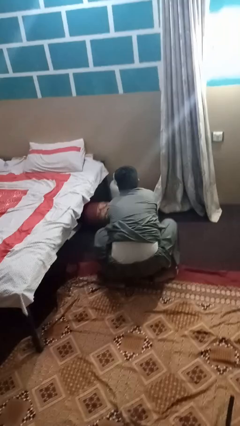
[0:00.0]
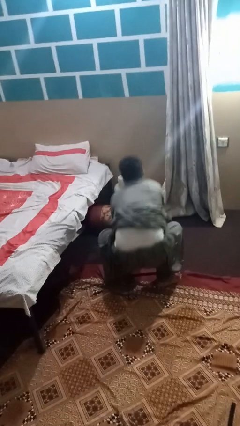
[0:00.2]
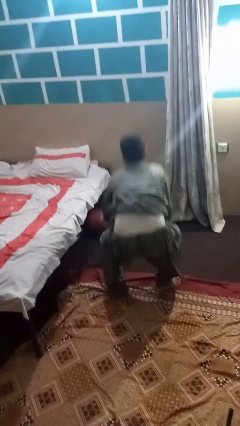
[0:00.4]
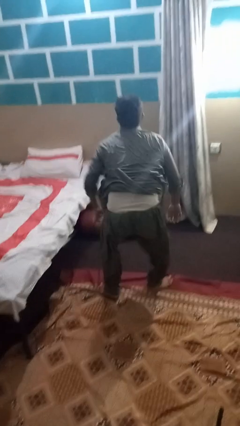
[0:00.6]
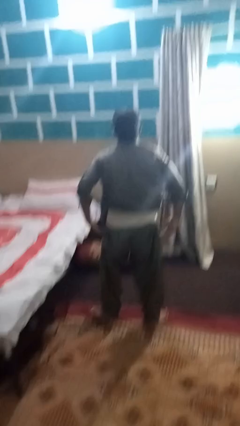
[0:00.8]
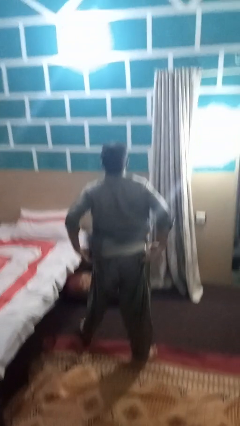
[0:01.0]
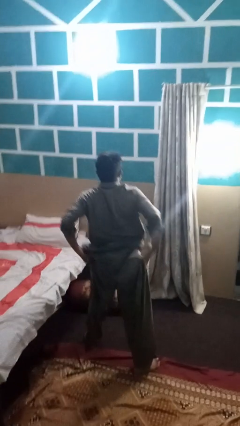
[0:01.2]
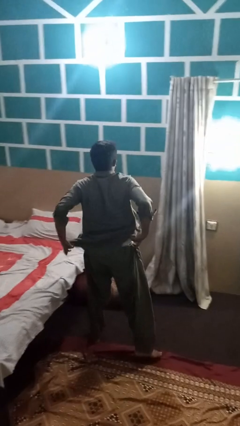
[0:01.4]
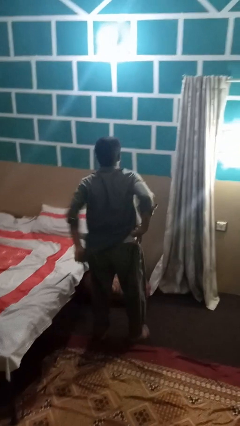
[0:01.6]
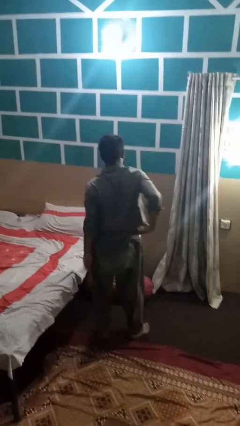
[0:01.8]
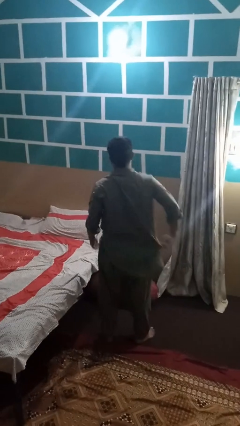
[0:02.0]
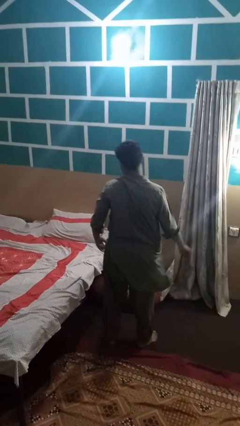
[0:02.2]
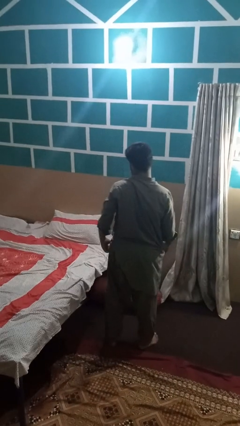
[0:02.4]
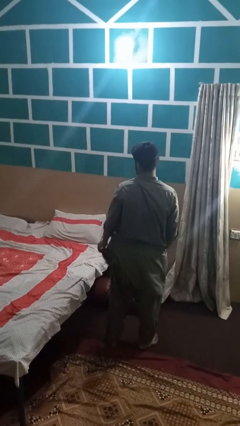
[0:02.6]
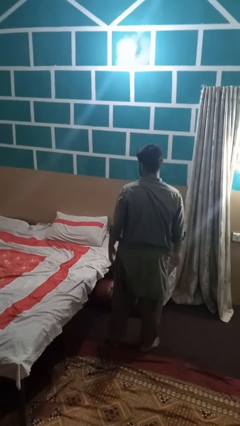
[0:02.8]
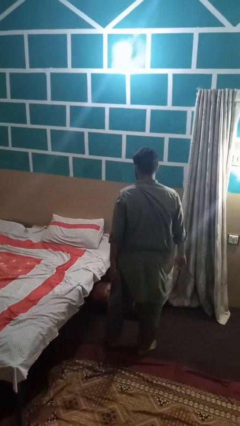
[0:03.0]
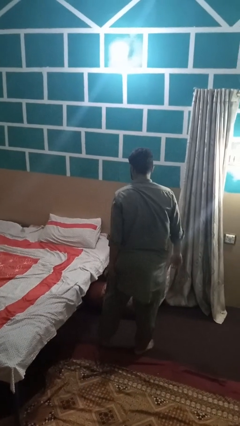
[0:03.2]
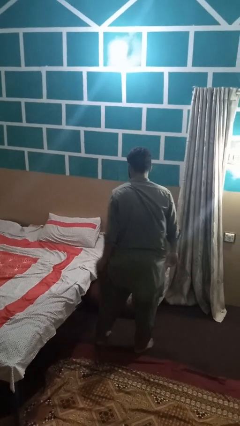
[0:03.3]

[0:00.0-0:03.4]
person stands up from floor

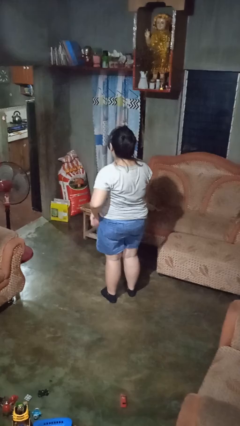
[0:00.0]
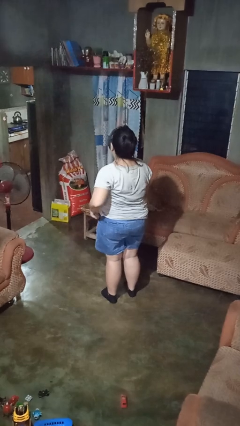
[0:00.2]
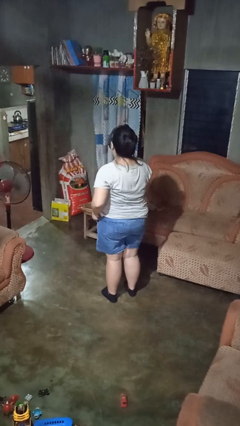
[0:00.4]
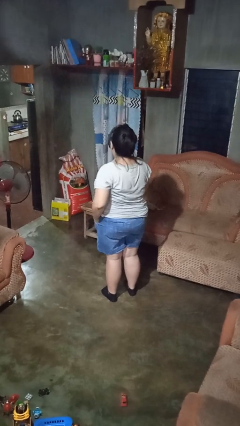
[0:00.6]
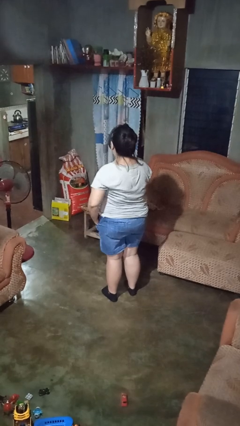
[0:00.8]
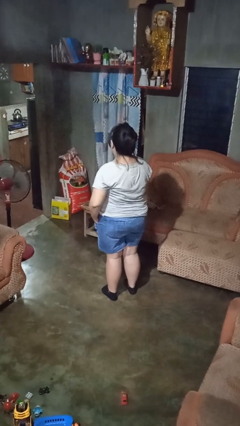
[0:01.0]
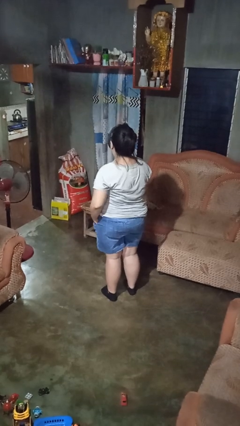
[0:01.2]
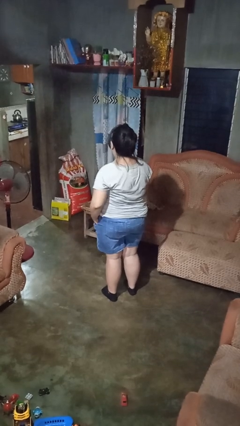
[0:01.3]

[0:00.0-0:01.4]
person puts hands in back pockets

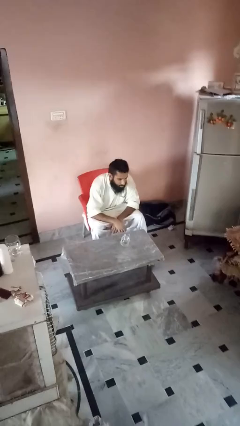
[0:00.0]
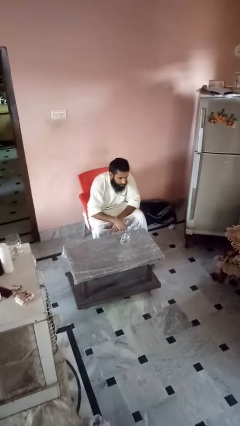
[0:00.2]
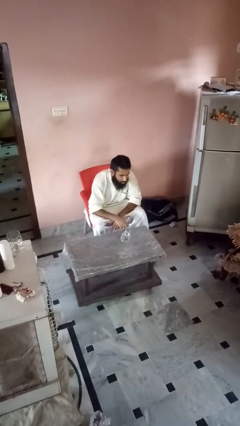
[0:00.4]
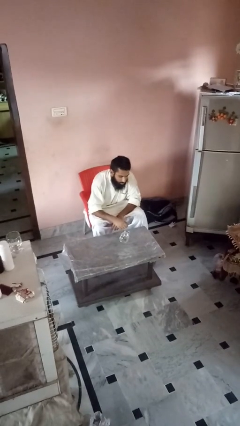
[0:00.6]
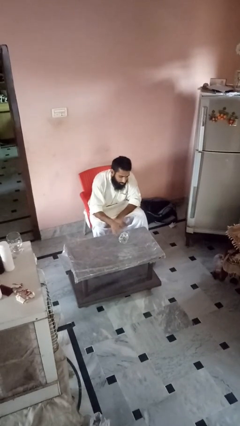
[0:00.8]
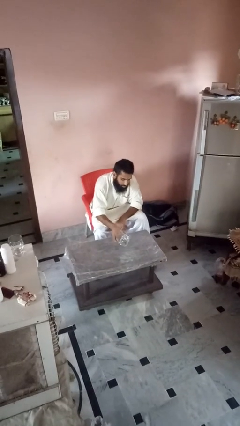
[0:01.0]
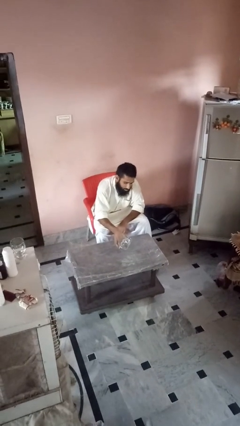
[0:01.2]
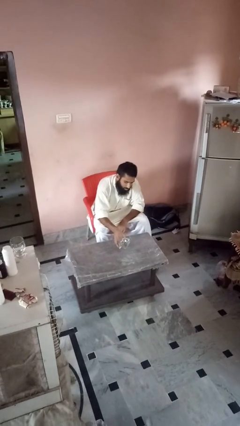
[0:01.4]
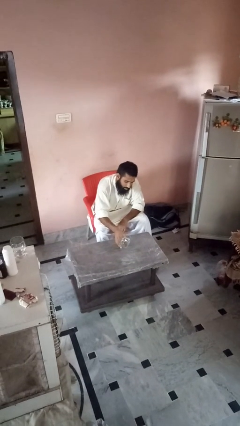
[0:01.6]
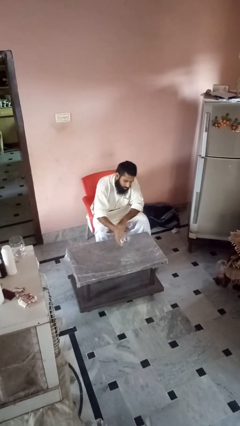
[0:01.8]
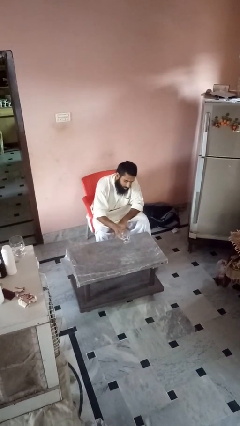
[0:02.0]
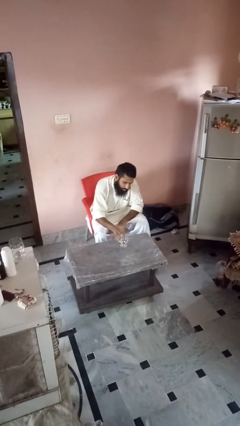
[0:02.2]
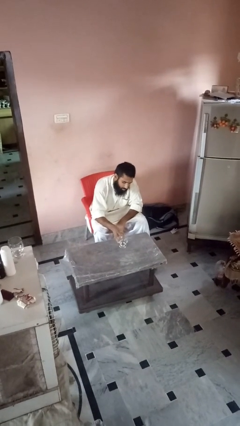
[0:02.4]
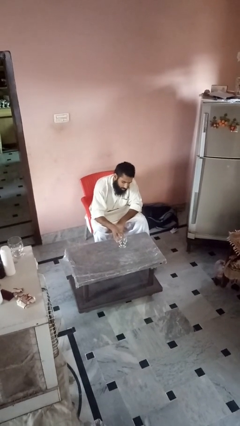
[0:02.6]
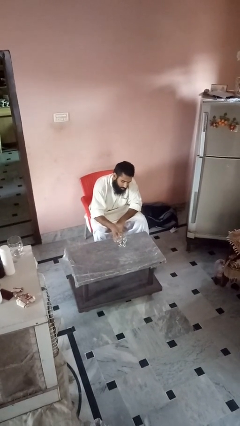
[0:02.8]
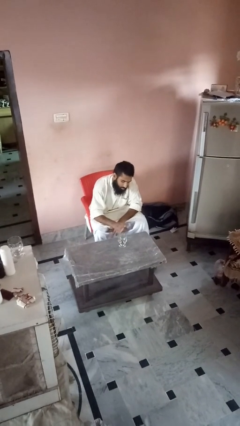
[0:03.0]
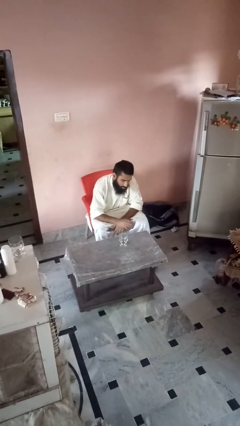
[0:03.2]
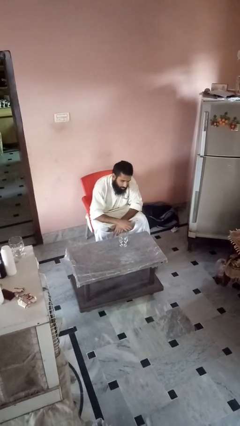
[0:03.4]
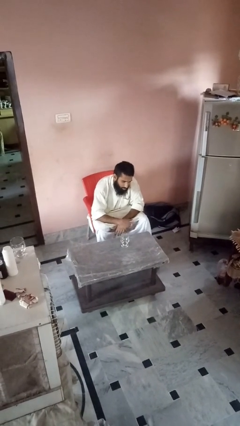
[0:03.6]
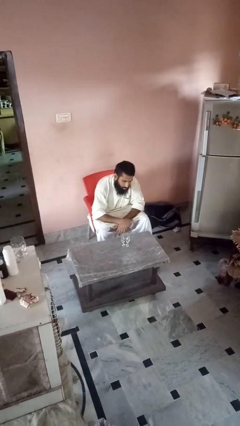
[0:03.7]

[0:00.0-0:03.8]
person sets upright glass

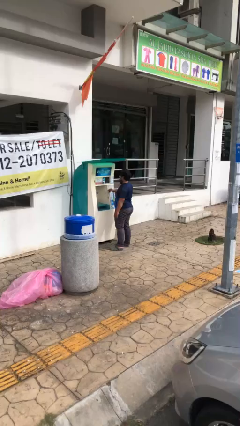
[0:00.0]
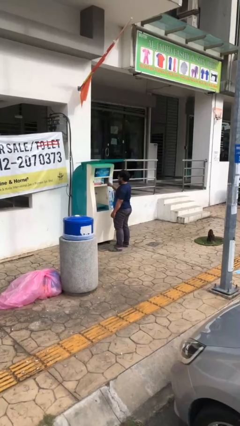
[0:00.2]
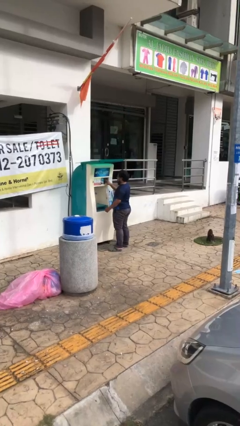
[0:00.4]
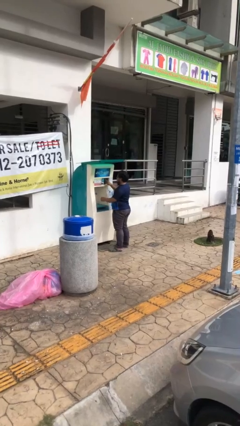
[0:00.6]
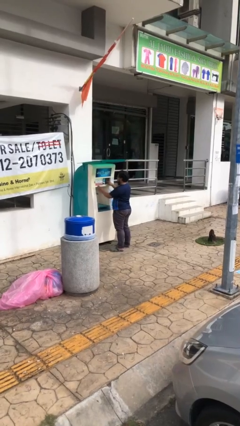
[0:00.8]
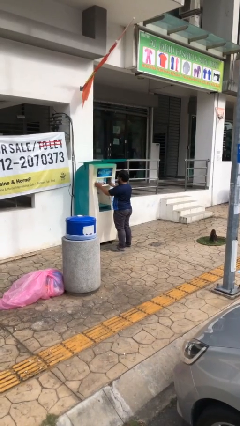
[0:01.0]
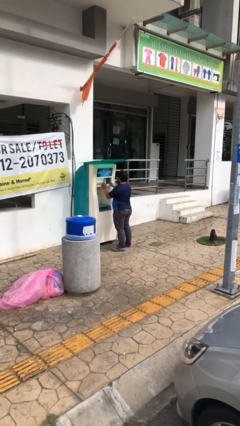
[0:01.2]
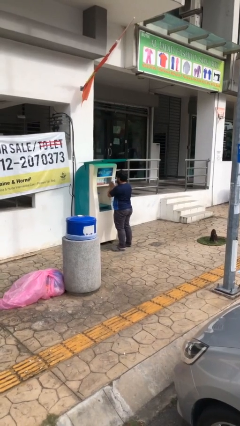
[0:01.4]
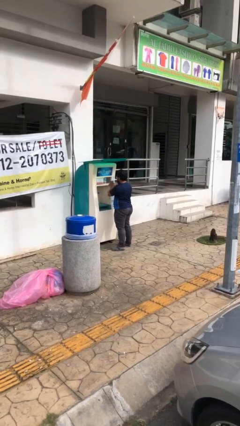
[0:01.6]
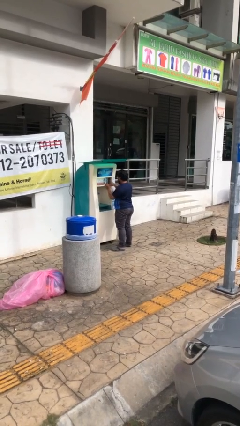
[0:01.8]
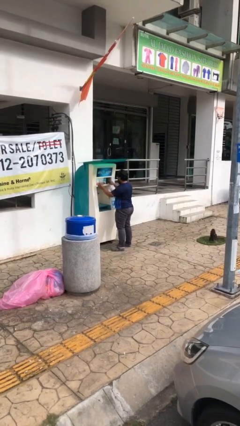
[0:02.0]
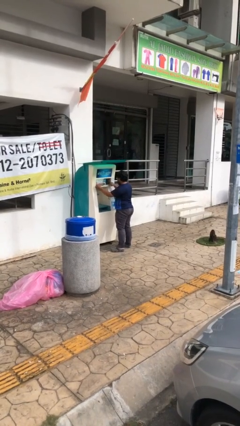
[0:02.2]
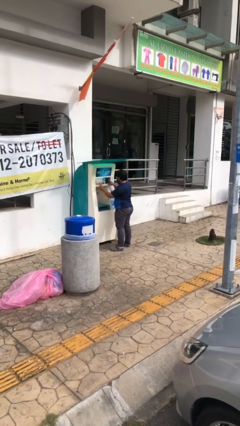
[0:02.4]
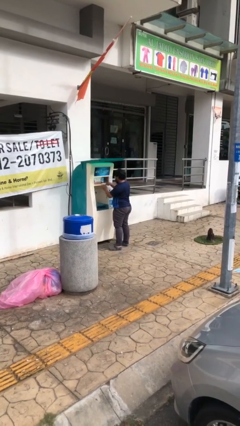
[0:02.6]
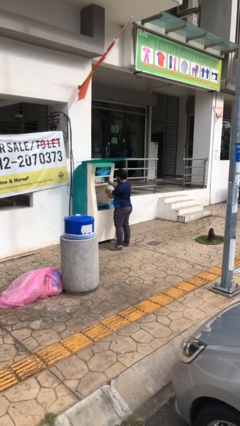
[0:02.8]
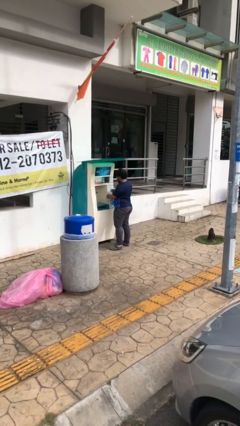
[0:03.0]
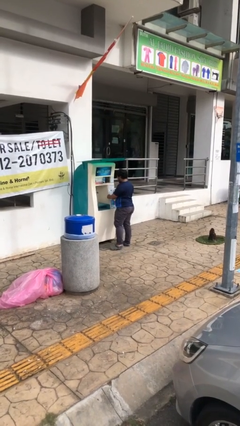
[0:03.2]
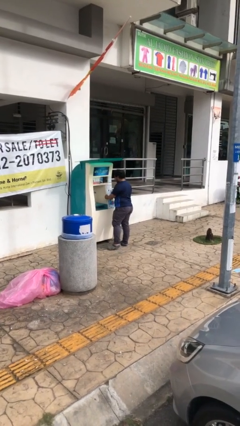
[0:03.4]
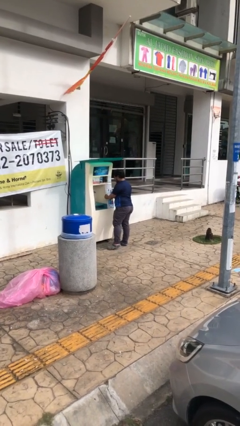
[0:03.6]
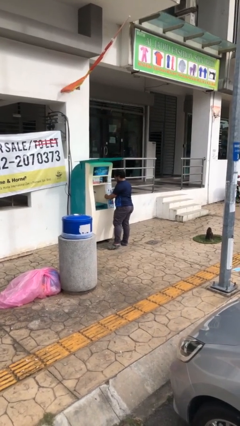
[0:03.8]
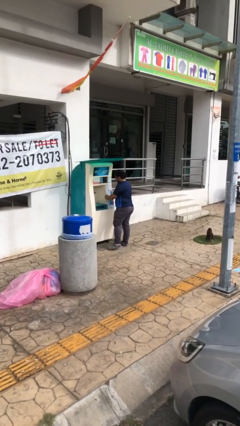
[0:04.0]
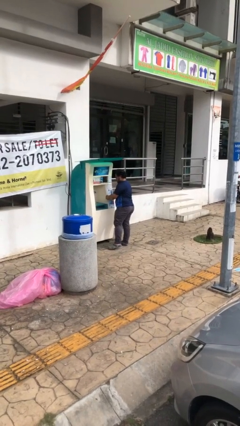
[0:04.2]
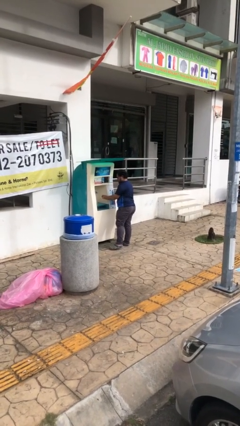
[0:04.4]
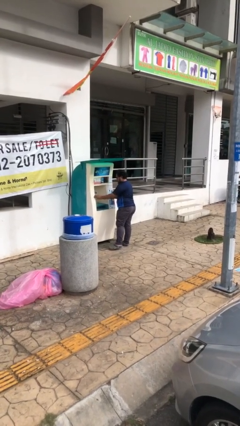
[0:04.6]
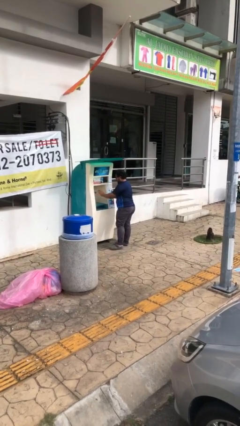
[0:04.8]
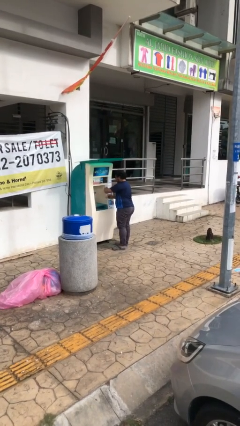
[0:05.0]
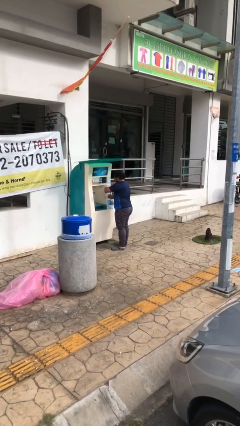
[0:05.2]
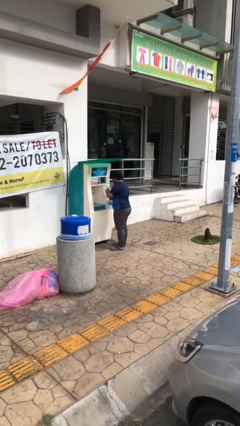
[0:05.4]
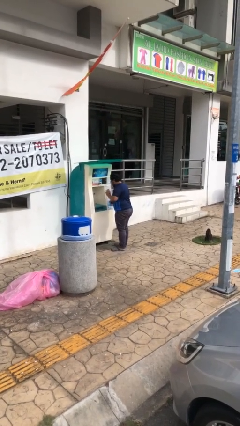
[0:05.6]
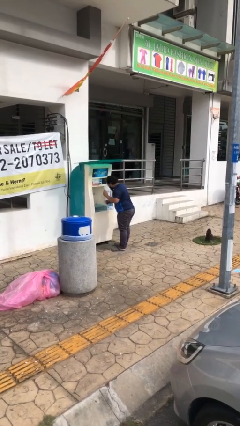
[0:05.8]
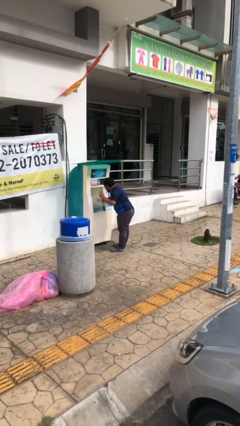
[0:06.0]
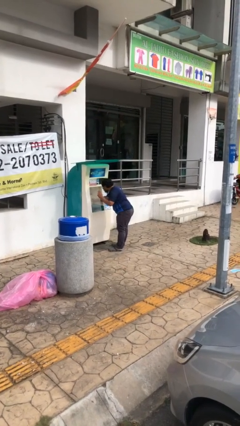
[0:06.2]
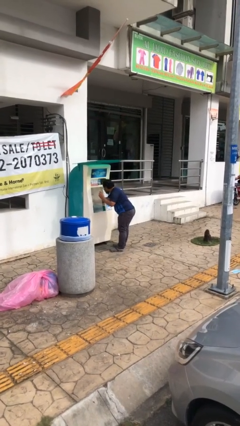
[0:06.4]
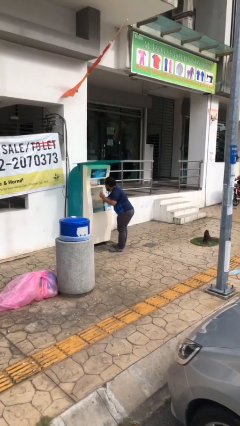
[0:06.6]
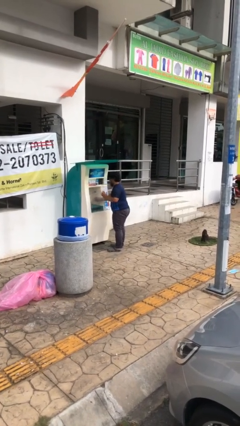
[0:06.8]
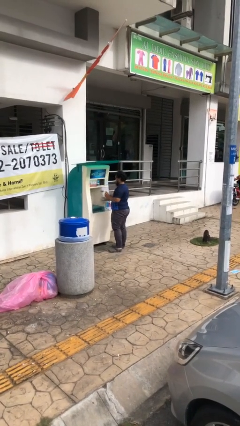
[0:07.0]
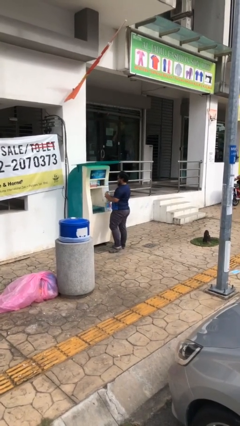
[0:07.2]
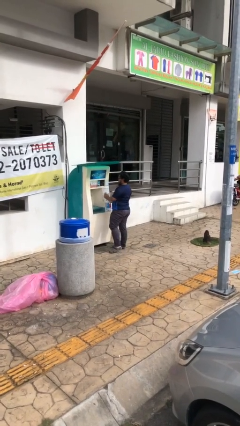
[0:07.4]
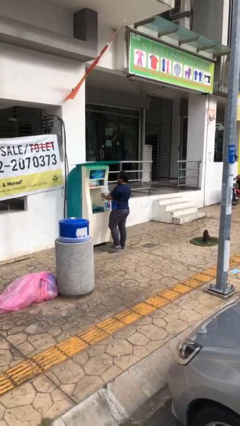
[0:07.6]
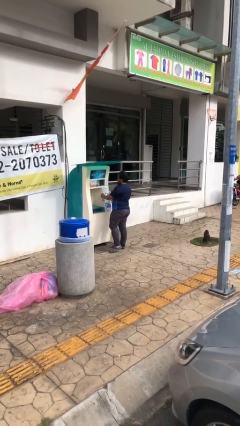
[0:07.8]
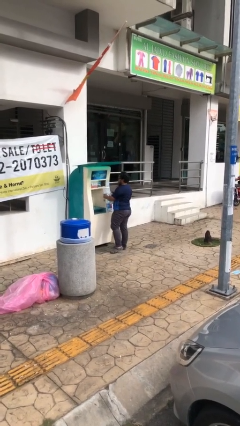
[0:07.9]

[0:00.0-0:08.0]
person purchases from machine

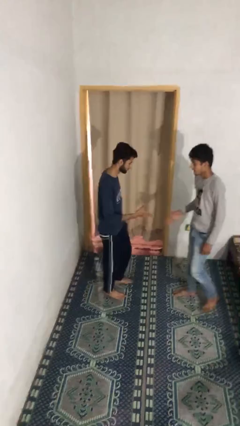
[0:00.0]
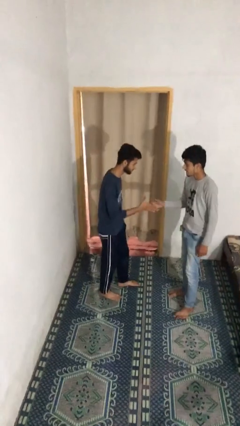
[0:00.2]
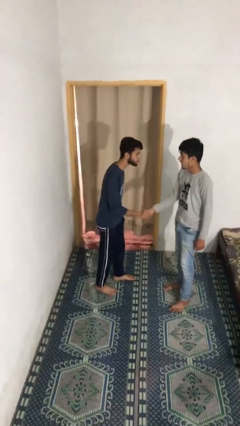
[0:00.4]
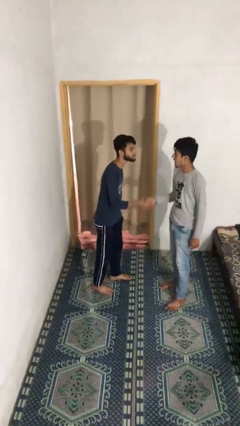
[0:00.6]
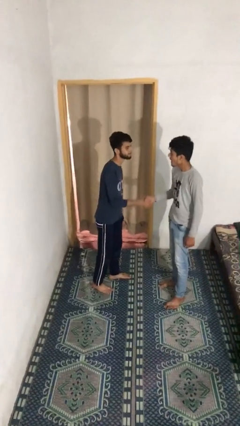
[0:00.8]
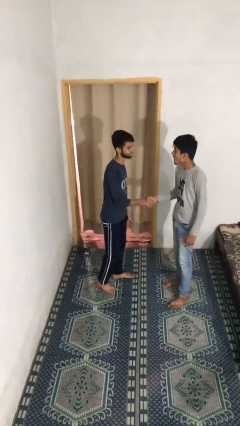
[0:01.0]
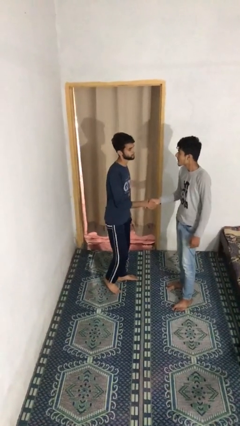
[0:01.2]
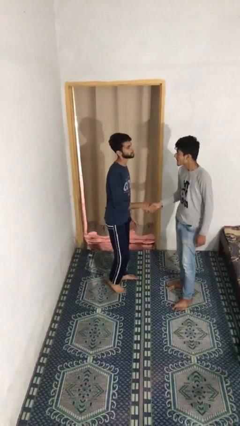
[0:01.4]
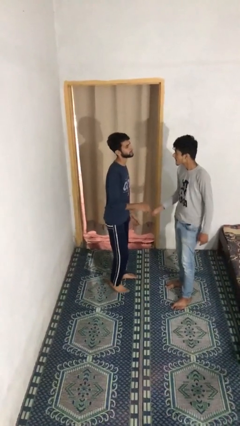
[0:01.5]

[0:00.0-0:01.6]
person embraces person
